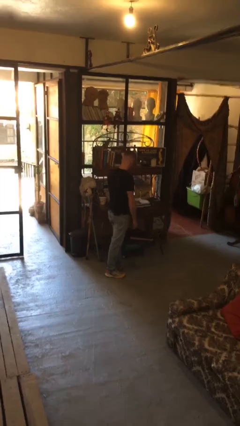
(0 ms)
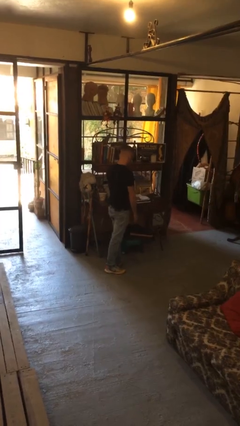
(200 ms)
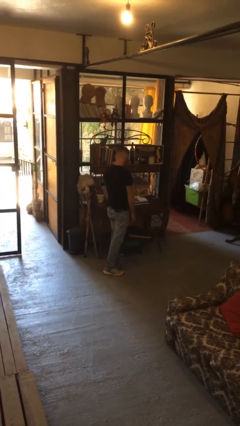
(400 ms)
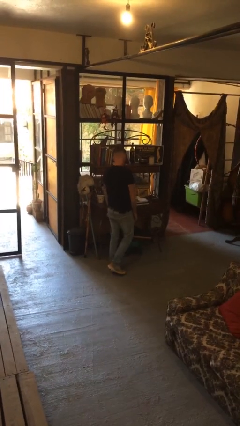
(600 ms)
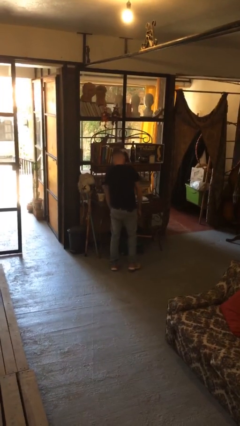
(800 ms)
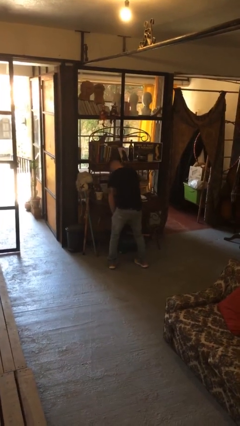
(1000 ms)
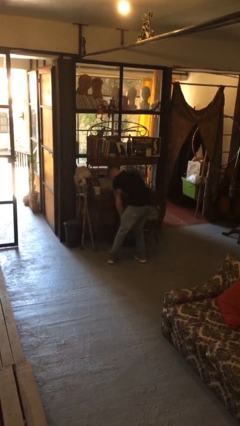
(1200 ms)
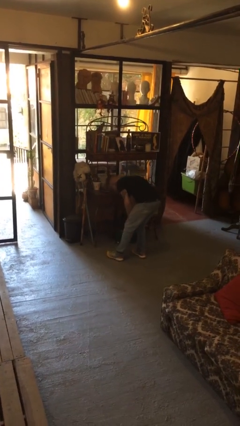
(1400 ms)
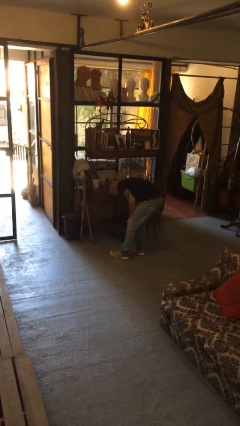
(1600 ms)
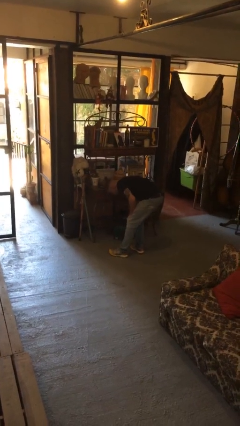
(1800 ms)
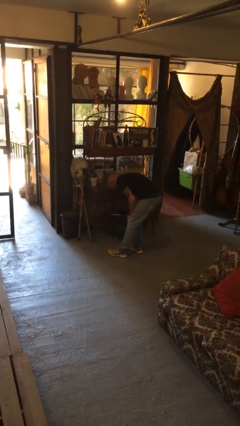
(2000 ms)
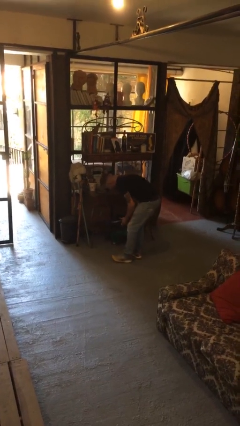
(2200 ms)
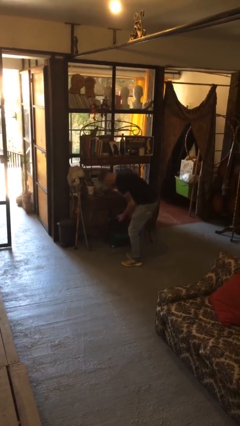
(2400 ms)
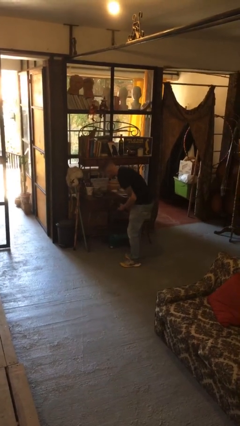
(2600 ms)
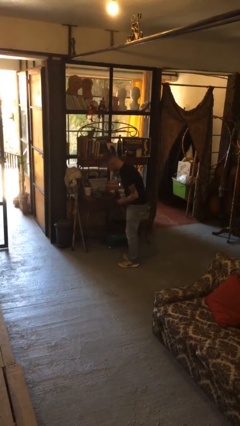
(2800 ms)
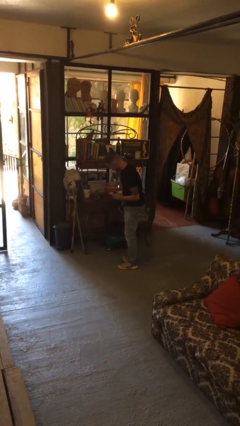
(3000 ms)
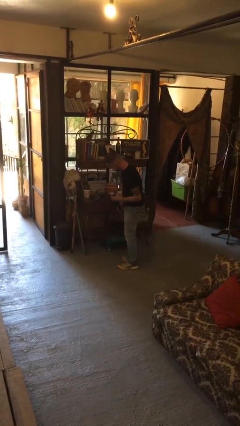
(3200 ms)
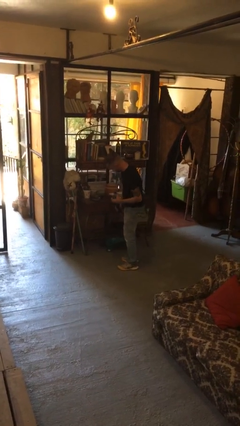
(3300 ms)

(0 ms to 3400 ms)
person picks up object from cabinet

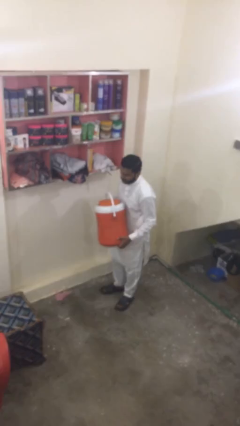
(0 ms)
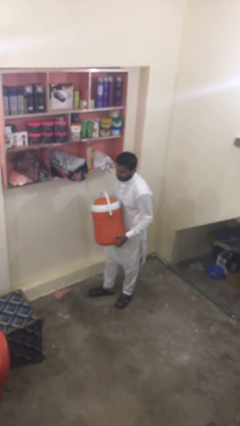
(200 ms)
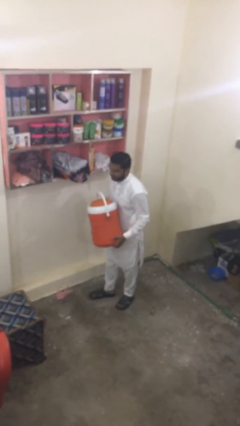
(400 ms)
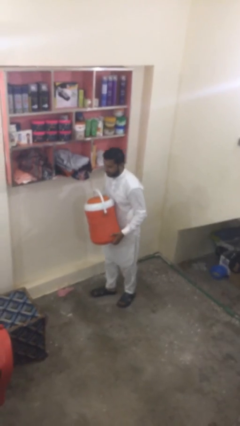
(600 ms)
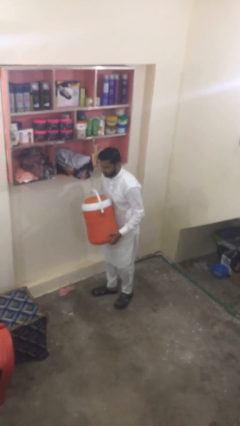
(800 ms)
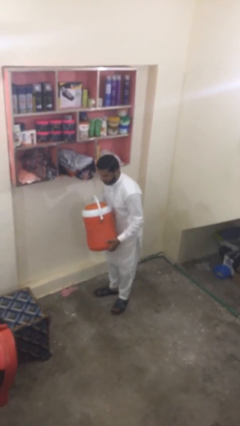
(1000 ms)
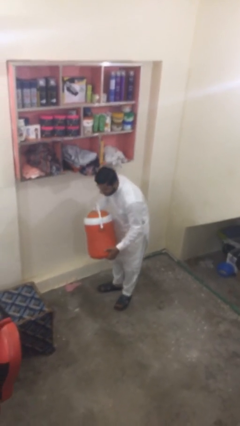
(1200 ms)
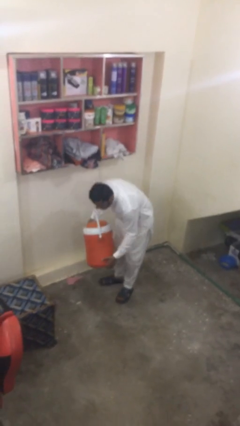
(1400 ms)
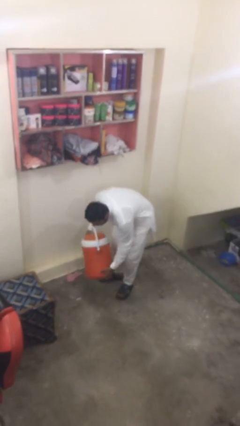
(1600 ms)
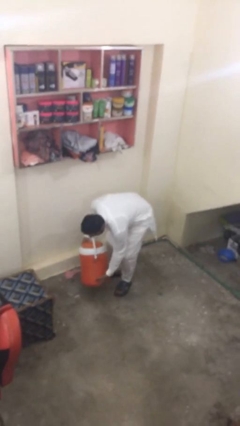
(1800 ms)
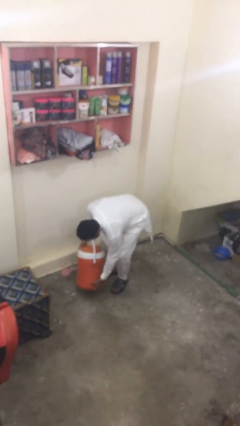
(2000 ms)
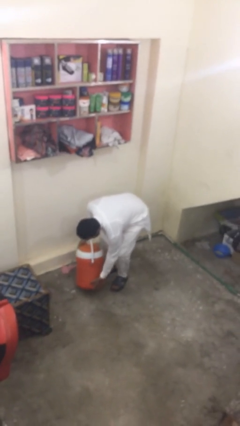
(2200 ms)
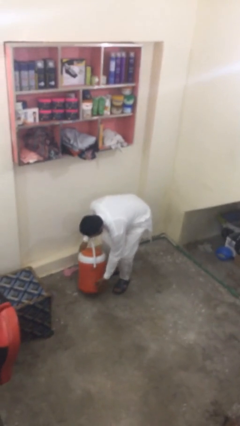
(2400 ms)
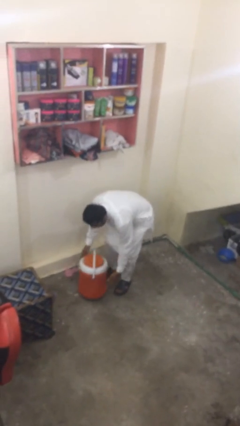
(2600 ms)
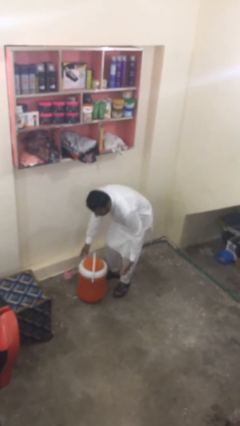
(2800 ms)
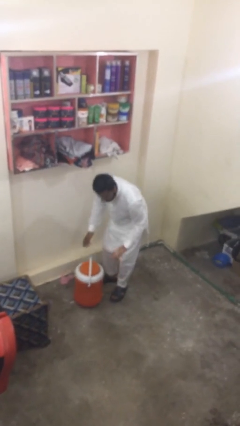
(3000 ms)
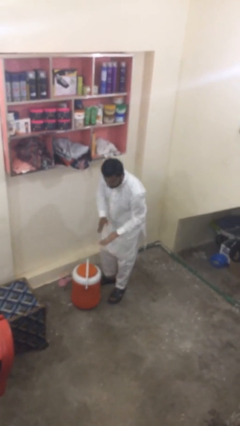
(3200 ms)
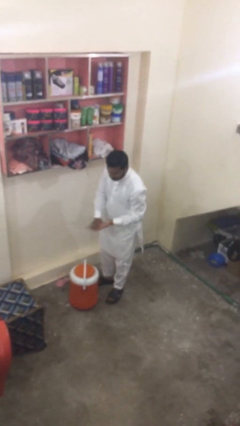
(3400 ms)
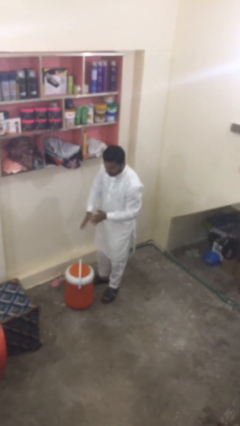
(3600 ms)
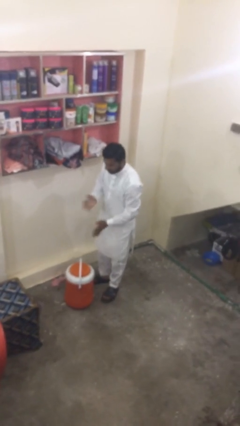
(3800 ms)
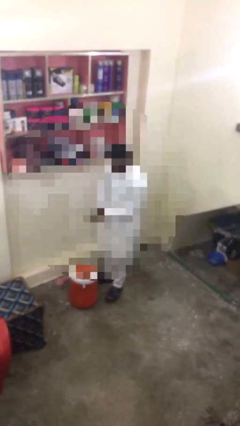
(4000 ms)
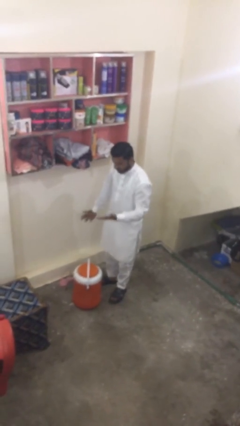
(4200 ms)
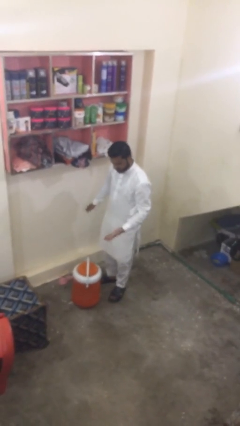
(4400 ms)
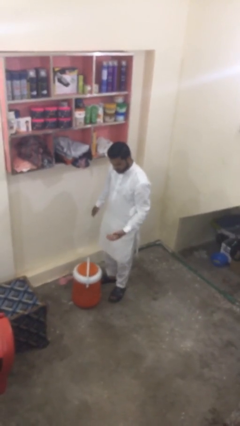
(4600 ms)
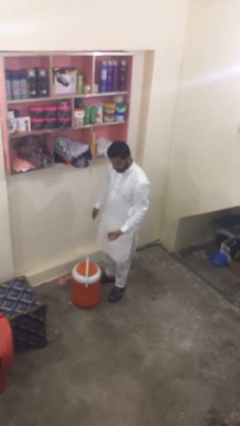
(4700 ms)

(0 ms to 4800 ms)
person puts down object on floor

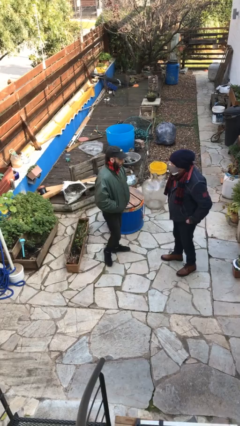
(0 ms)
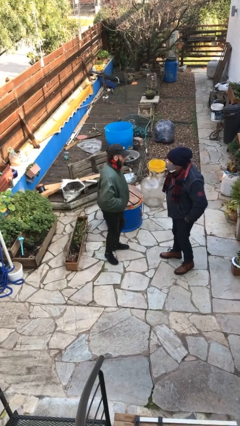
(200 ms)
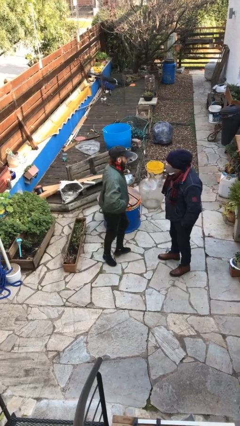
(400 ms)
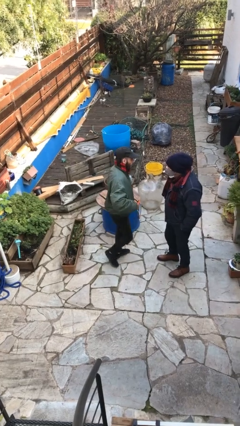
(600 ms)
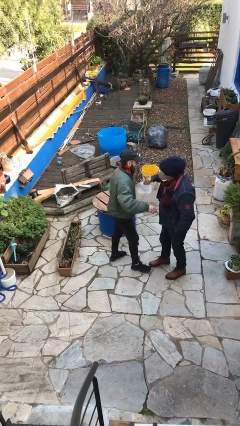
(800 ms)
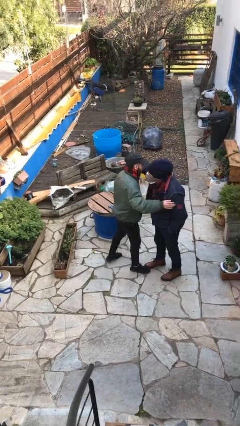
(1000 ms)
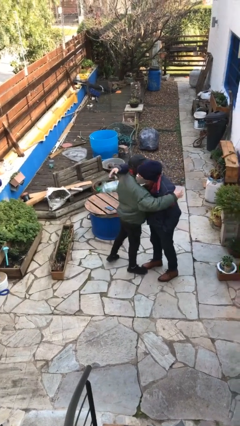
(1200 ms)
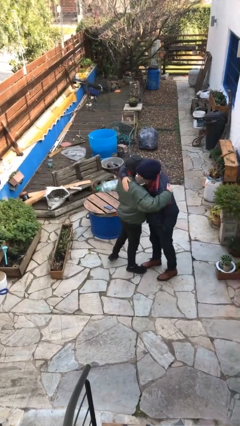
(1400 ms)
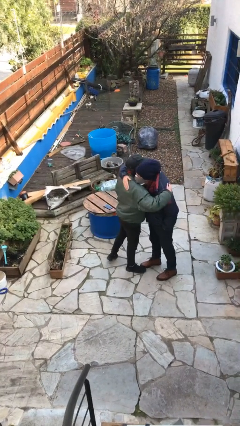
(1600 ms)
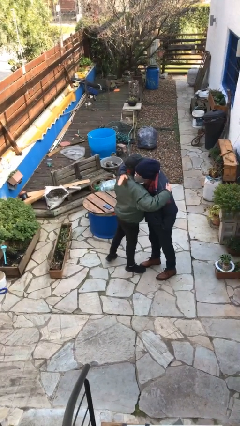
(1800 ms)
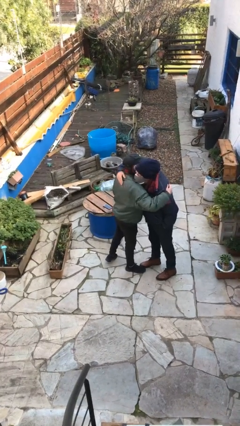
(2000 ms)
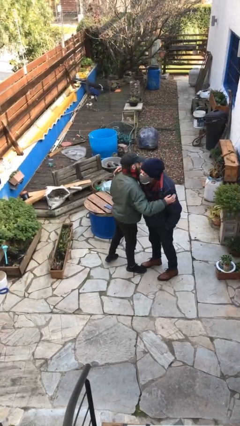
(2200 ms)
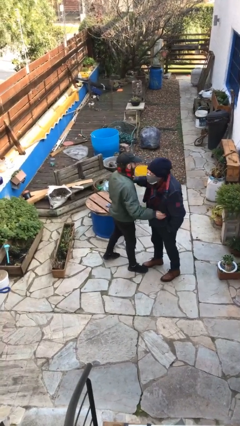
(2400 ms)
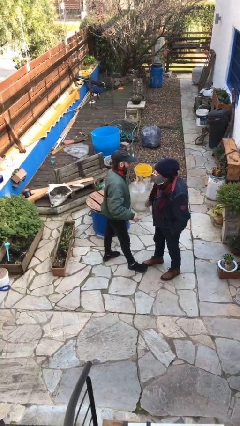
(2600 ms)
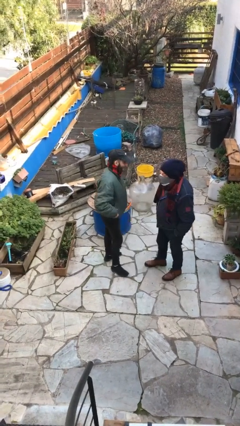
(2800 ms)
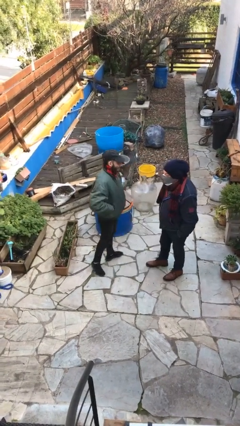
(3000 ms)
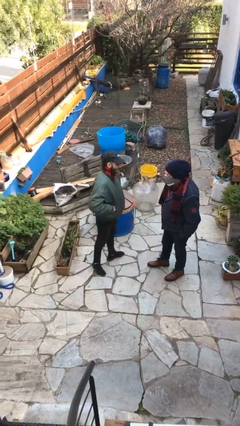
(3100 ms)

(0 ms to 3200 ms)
person kisses cheek of person

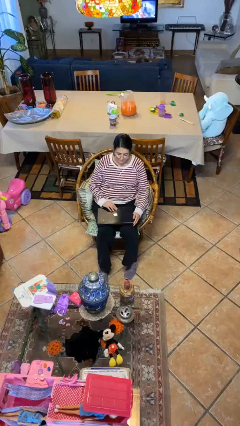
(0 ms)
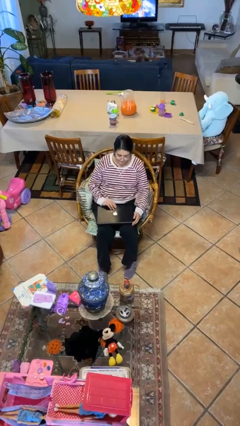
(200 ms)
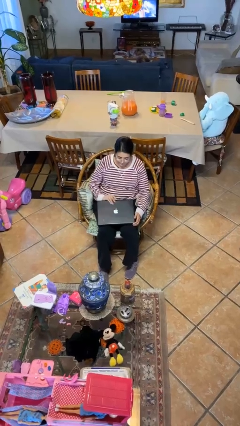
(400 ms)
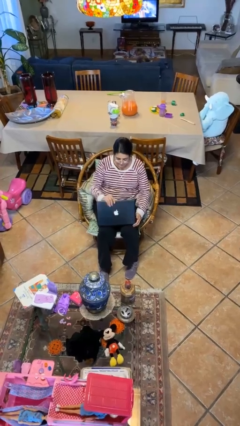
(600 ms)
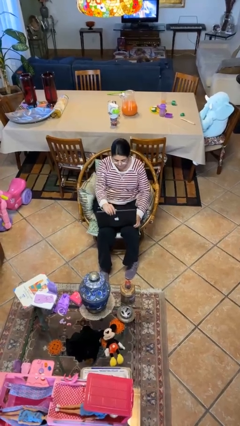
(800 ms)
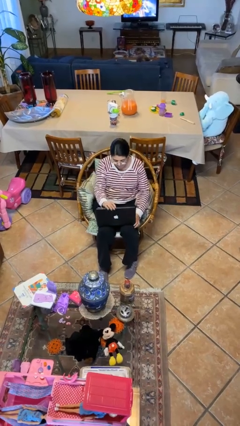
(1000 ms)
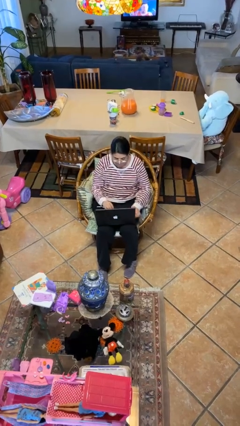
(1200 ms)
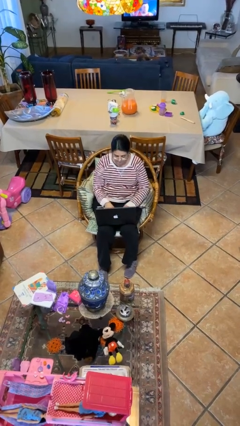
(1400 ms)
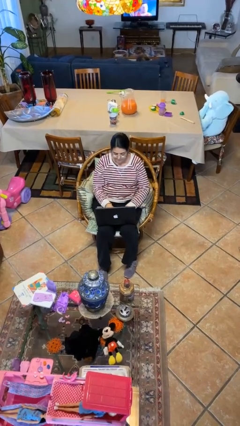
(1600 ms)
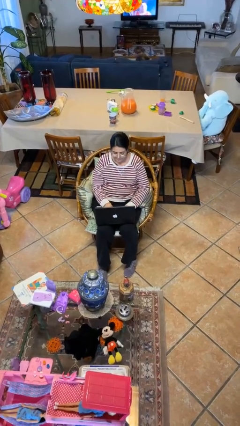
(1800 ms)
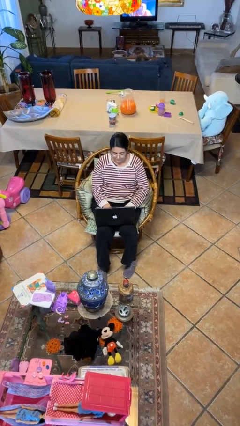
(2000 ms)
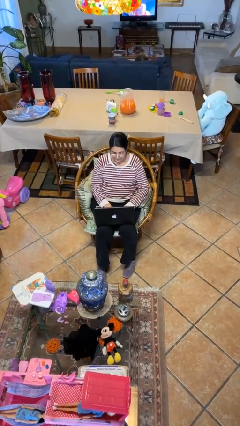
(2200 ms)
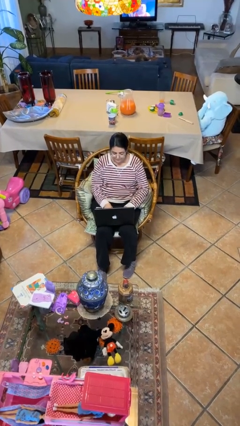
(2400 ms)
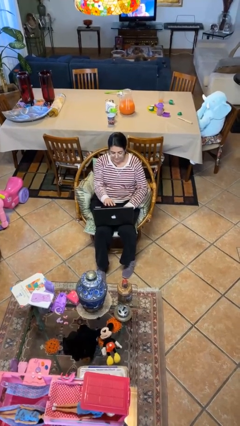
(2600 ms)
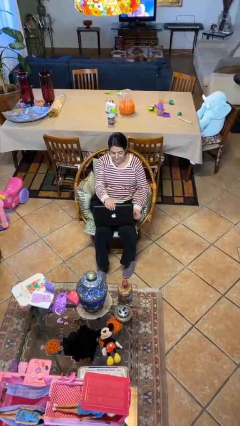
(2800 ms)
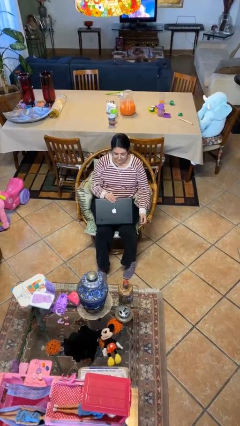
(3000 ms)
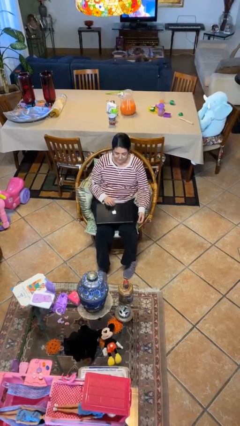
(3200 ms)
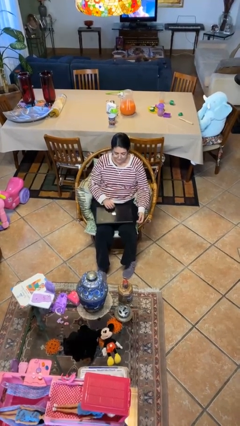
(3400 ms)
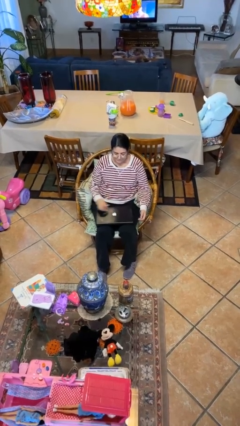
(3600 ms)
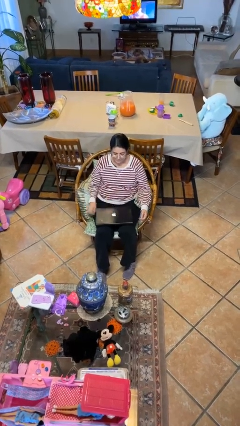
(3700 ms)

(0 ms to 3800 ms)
person interacts with laptop

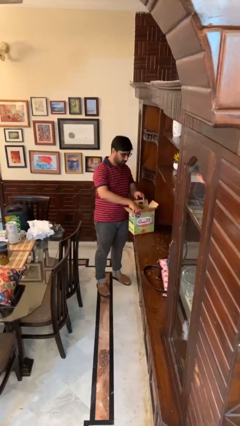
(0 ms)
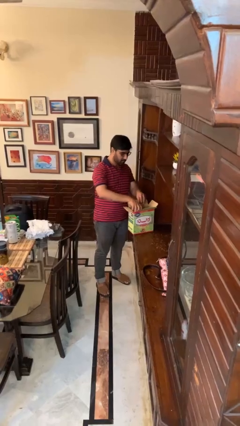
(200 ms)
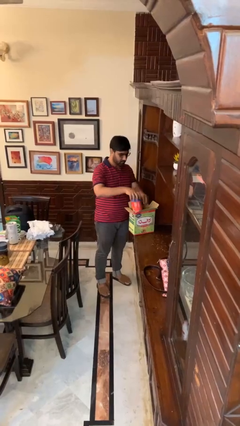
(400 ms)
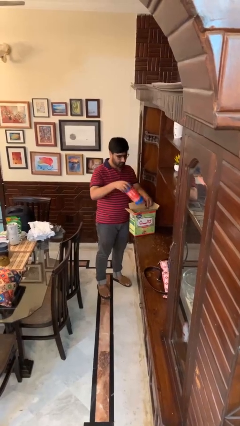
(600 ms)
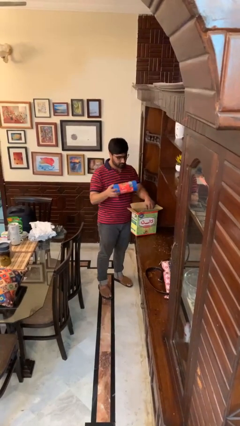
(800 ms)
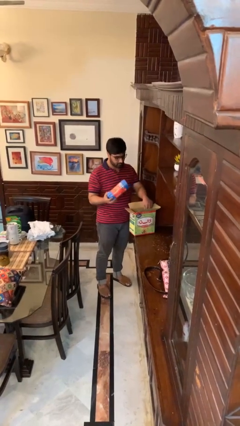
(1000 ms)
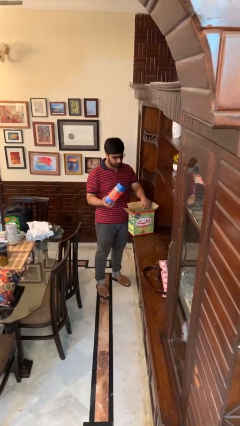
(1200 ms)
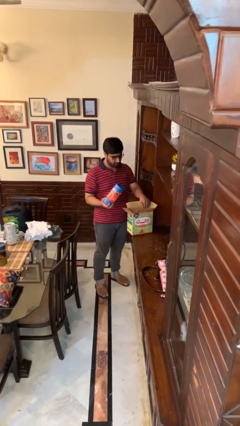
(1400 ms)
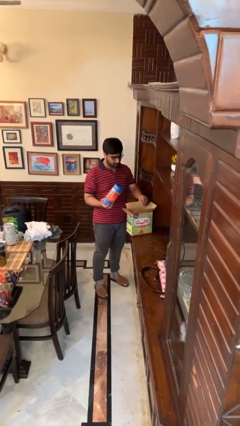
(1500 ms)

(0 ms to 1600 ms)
person takes object from box

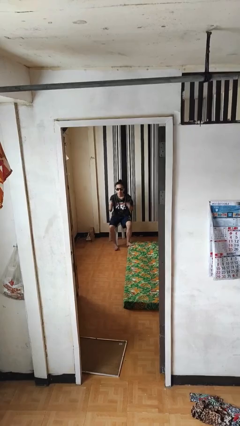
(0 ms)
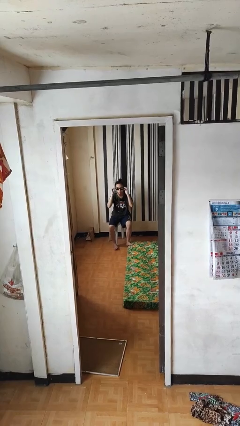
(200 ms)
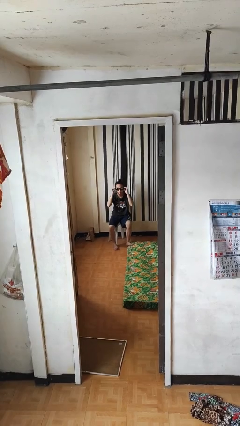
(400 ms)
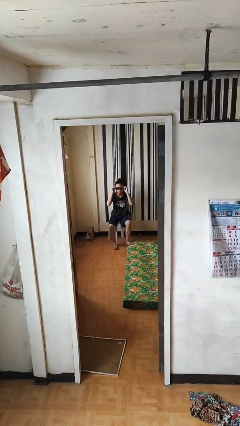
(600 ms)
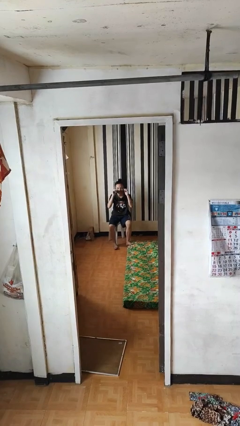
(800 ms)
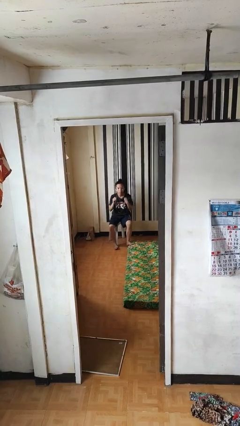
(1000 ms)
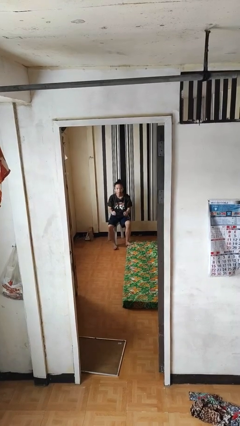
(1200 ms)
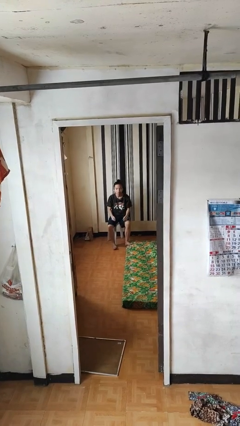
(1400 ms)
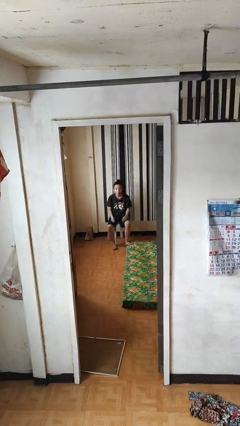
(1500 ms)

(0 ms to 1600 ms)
person takes off sunglasses
